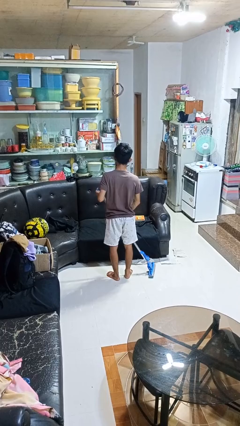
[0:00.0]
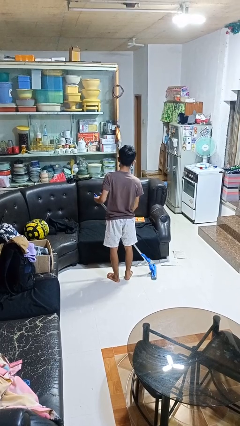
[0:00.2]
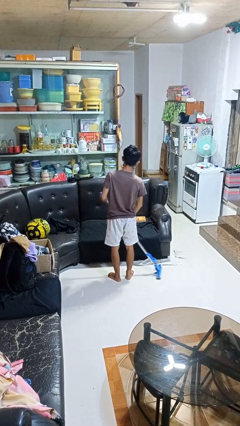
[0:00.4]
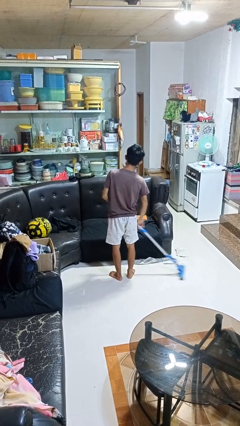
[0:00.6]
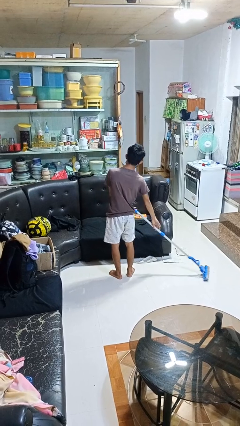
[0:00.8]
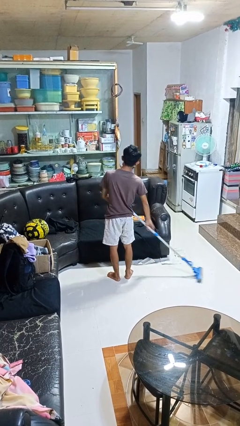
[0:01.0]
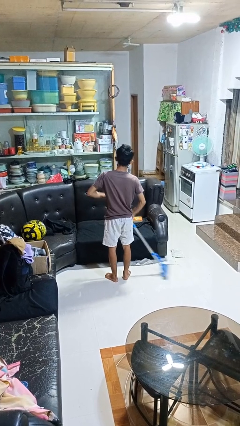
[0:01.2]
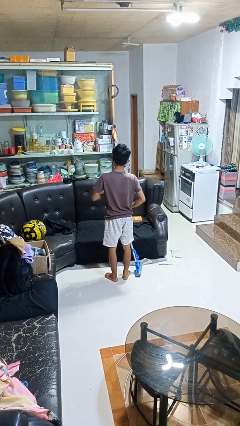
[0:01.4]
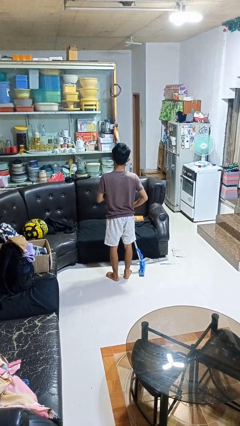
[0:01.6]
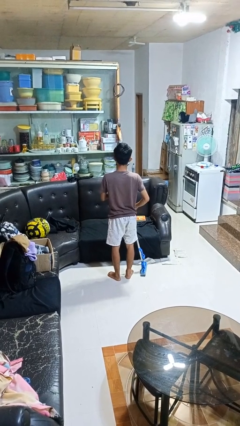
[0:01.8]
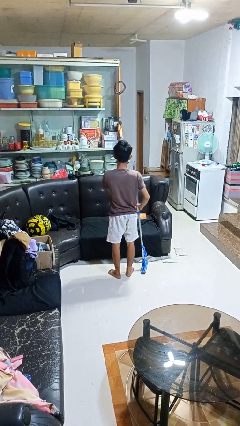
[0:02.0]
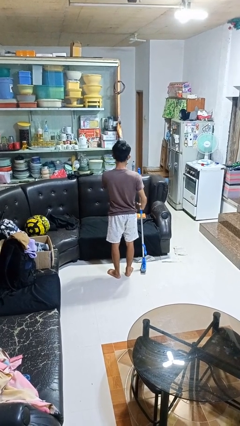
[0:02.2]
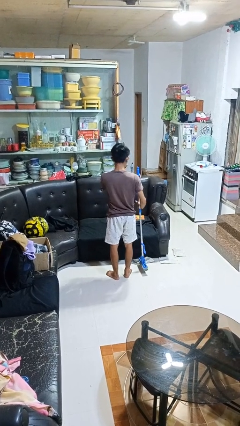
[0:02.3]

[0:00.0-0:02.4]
person mops

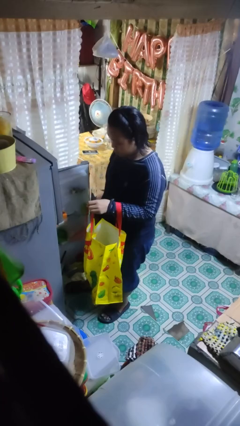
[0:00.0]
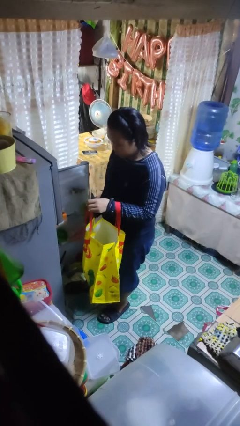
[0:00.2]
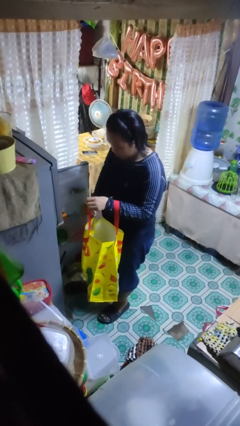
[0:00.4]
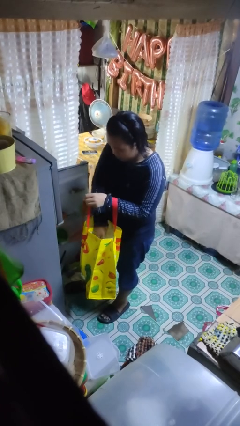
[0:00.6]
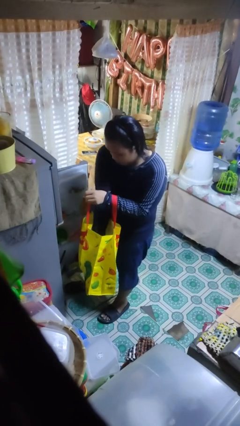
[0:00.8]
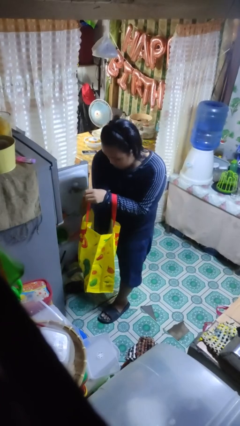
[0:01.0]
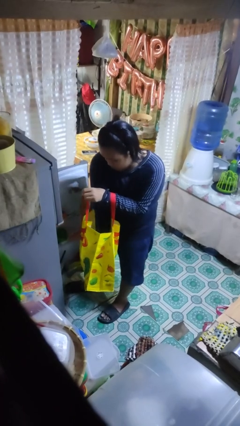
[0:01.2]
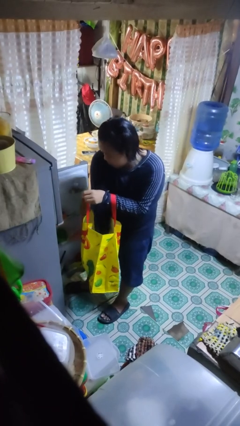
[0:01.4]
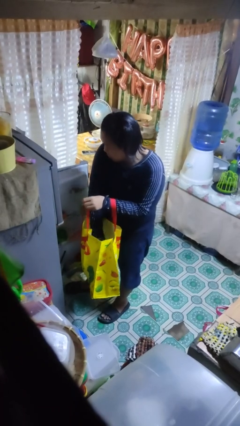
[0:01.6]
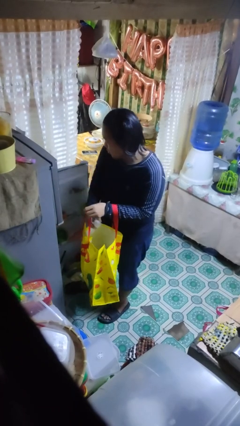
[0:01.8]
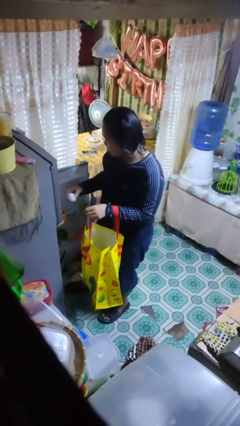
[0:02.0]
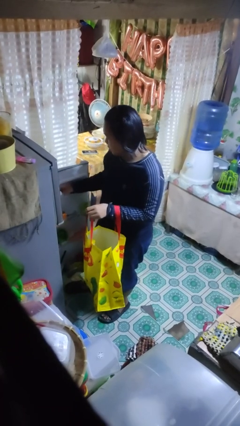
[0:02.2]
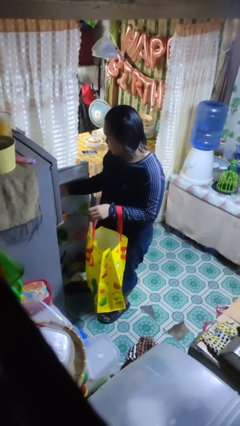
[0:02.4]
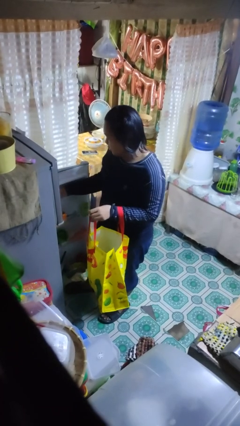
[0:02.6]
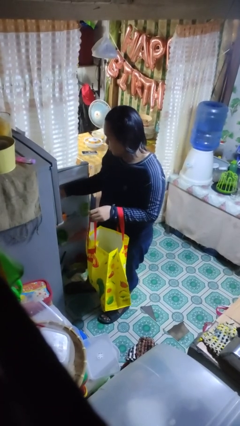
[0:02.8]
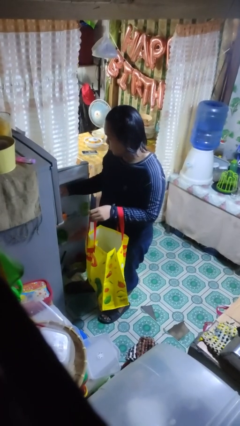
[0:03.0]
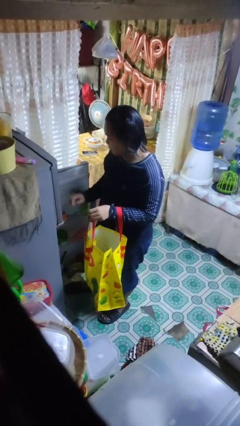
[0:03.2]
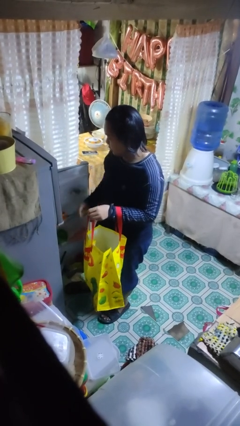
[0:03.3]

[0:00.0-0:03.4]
person loads groceries into refrigerator

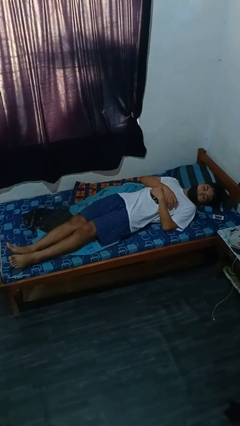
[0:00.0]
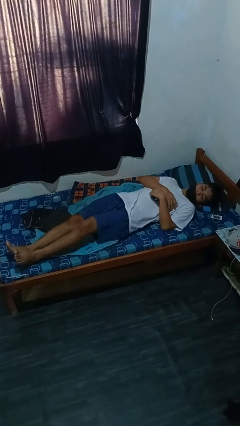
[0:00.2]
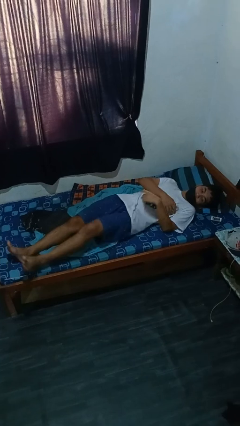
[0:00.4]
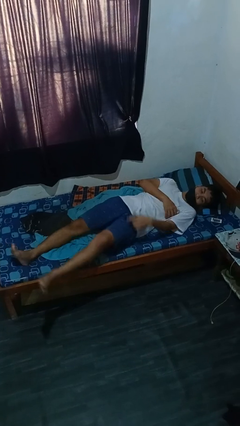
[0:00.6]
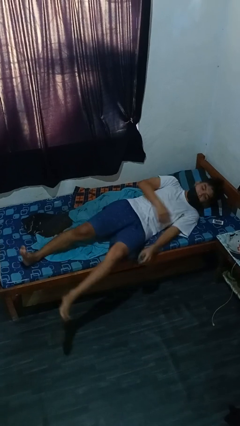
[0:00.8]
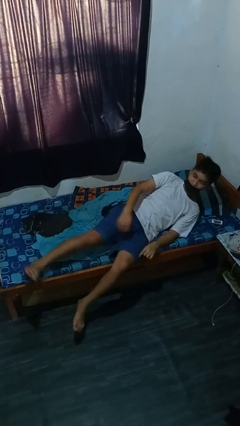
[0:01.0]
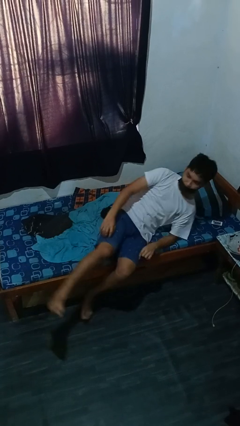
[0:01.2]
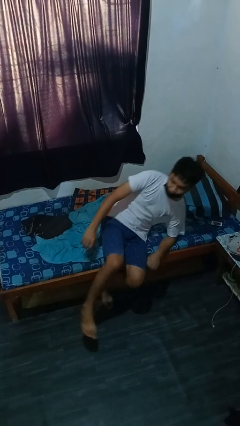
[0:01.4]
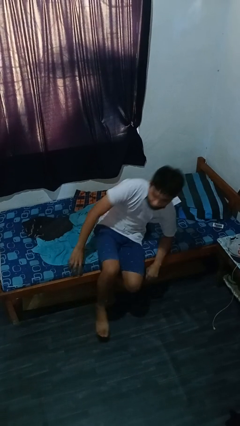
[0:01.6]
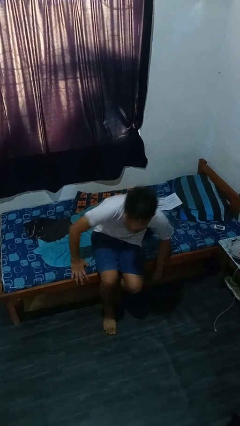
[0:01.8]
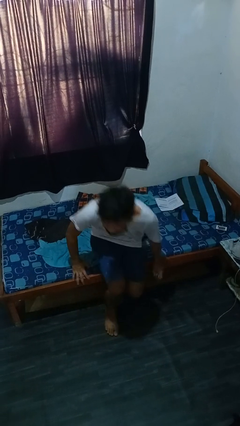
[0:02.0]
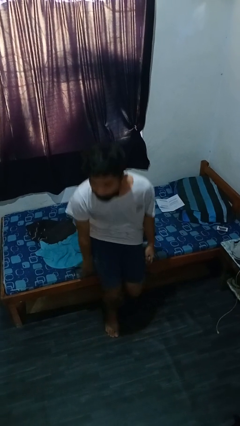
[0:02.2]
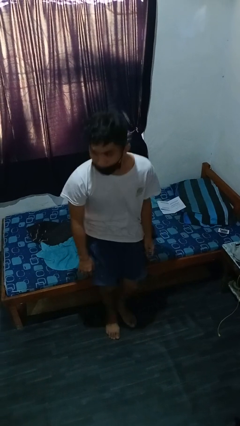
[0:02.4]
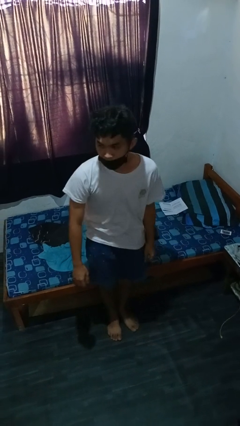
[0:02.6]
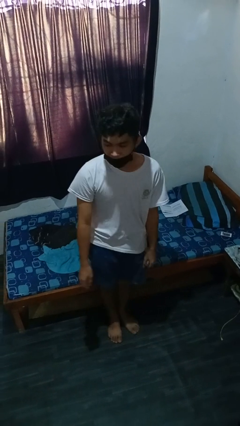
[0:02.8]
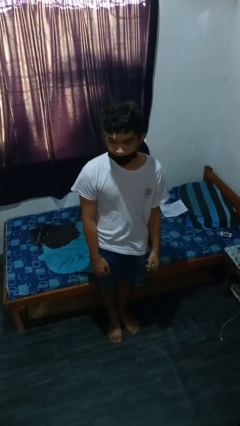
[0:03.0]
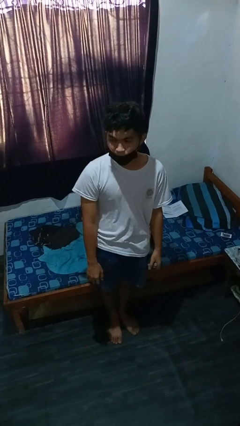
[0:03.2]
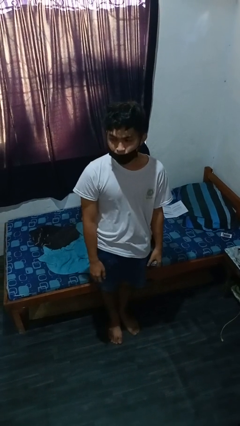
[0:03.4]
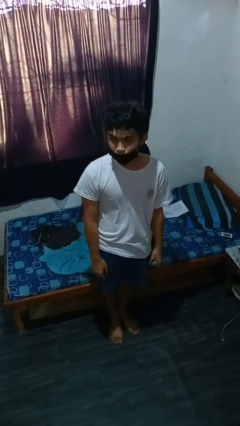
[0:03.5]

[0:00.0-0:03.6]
person stands up

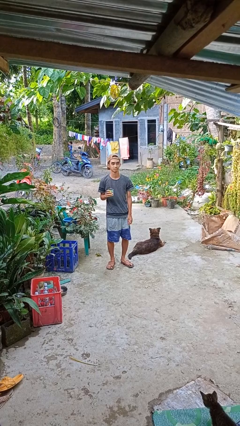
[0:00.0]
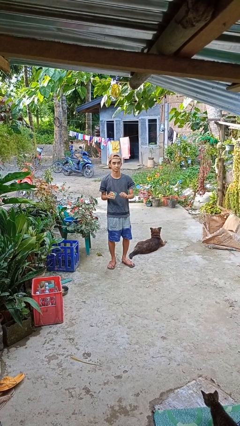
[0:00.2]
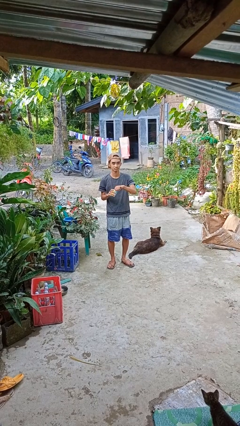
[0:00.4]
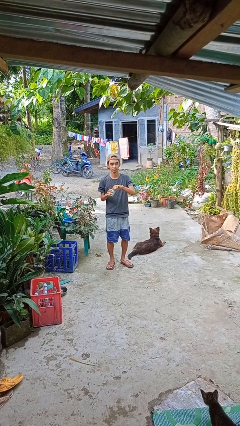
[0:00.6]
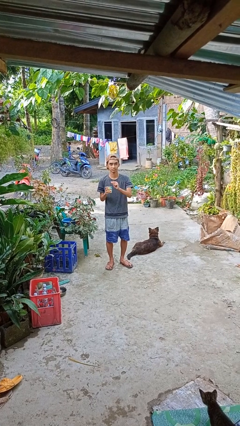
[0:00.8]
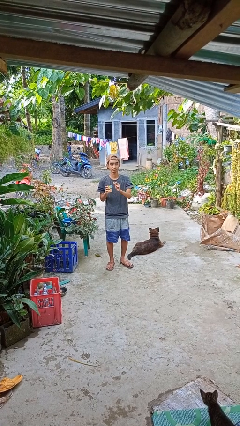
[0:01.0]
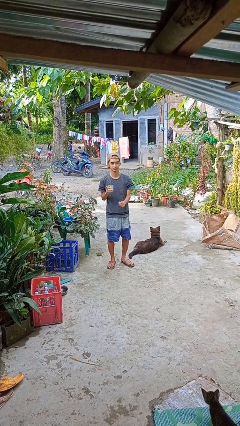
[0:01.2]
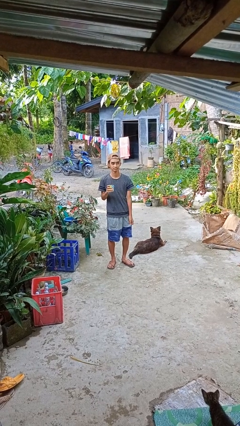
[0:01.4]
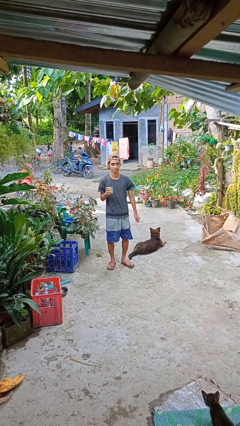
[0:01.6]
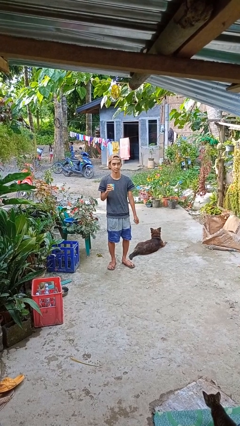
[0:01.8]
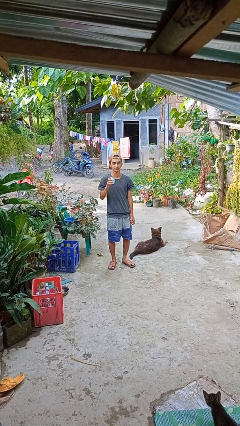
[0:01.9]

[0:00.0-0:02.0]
person opens beverage can

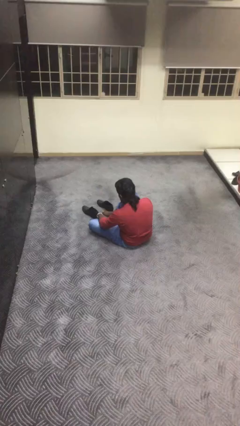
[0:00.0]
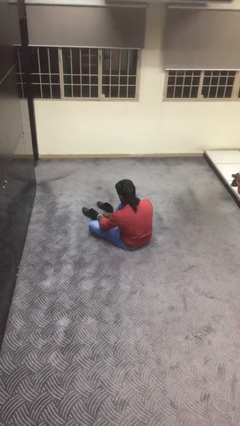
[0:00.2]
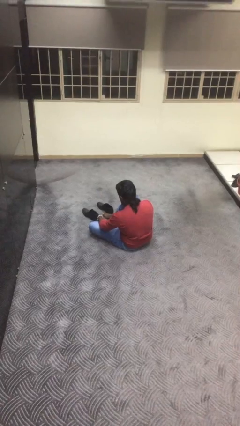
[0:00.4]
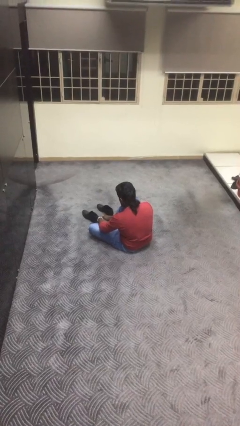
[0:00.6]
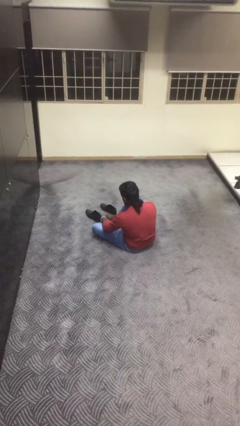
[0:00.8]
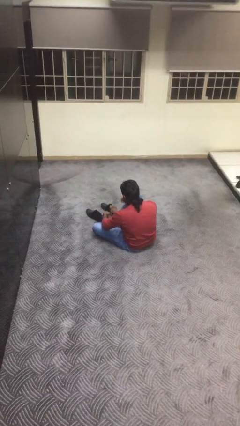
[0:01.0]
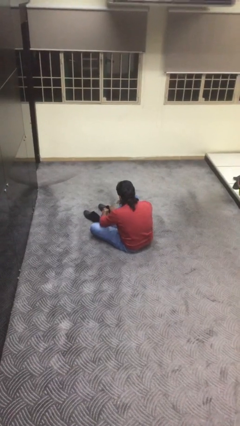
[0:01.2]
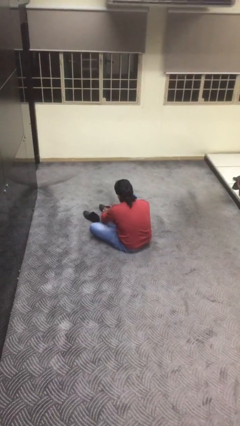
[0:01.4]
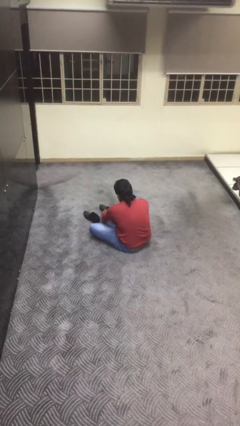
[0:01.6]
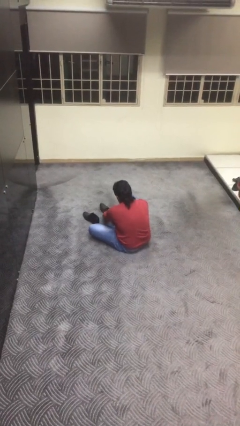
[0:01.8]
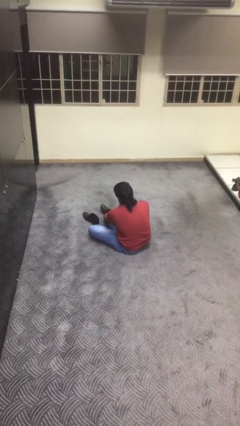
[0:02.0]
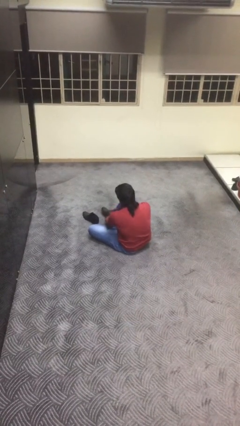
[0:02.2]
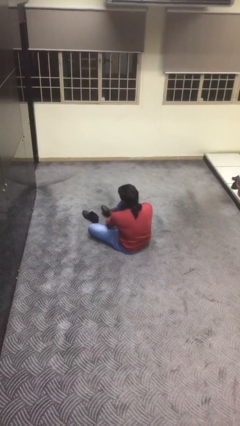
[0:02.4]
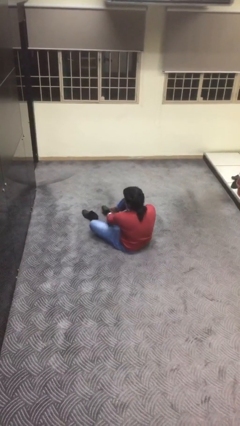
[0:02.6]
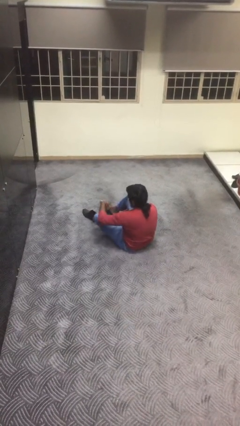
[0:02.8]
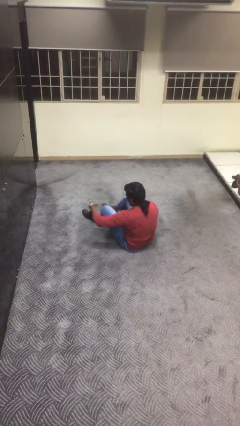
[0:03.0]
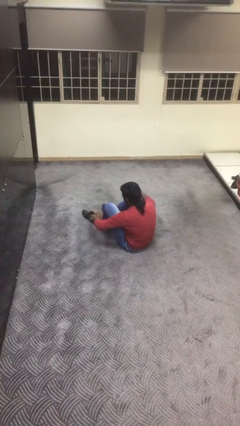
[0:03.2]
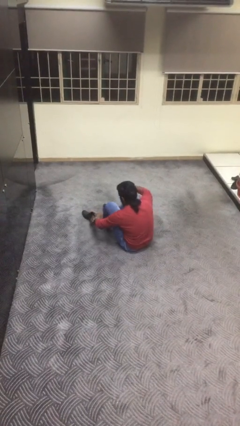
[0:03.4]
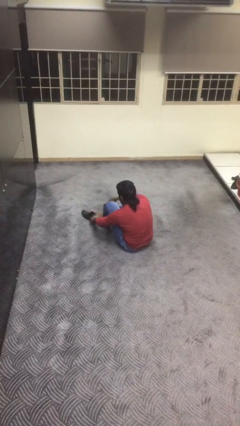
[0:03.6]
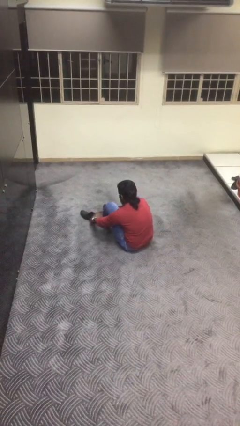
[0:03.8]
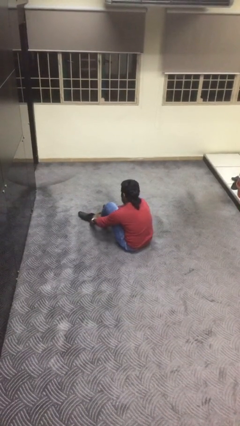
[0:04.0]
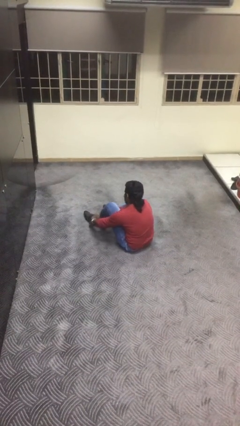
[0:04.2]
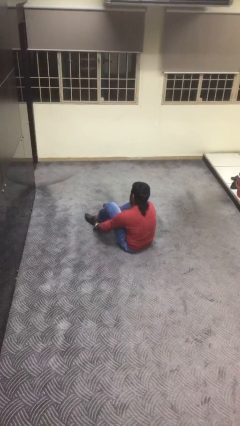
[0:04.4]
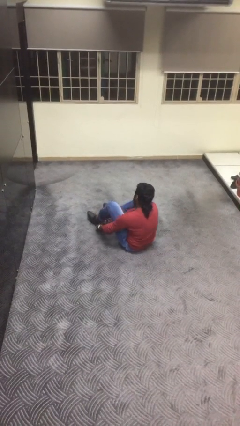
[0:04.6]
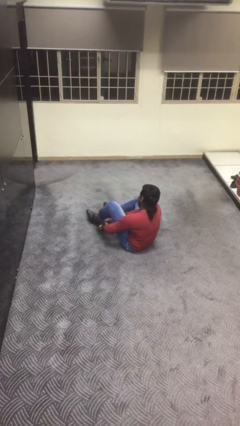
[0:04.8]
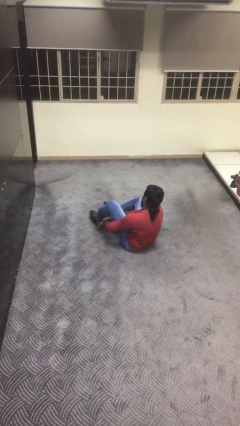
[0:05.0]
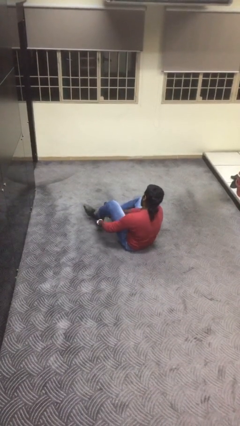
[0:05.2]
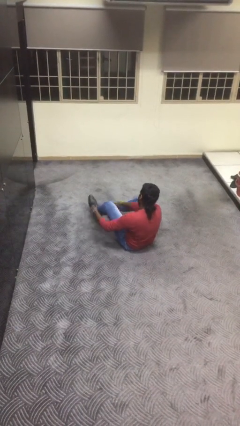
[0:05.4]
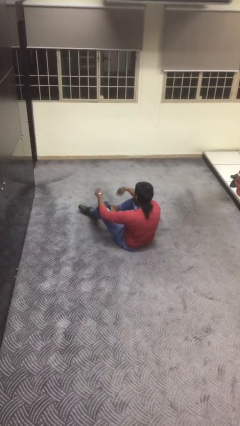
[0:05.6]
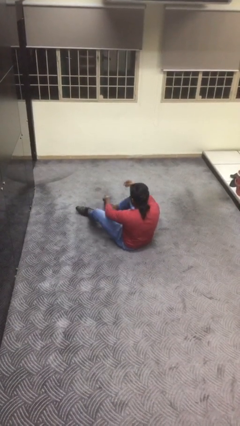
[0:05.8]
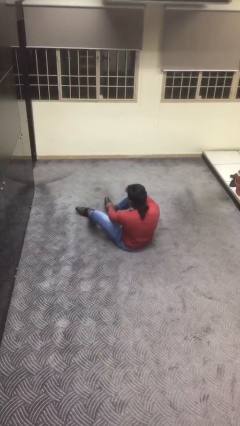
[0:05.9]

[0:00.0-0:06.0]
person puts on shoes

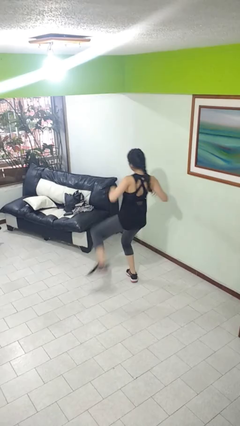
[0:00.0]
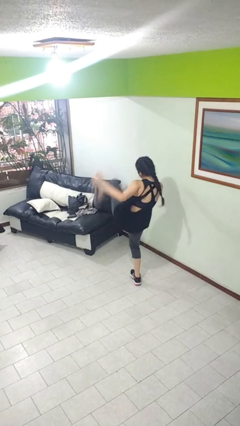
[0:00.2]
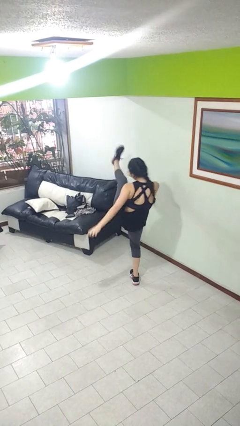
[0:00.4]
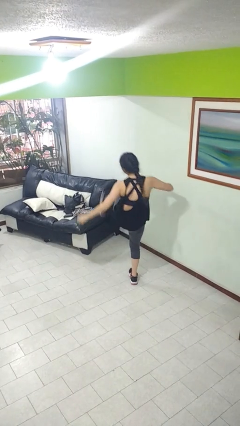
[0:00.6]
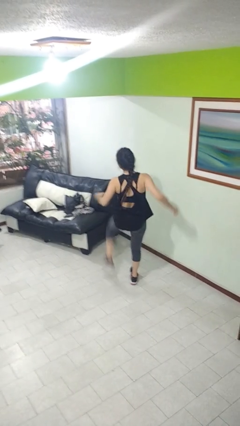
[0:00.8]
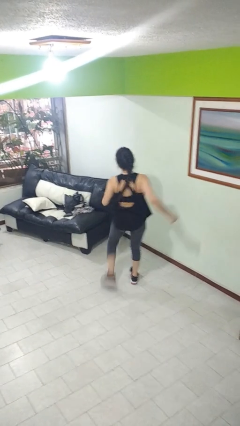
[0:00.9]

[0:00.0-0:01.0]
person karate kicks
